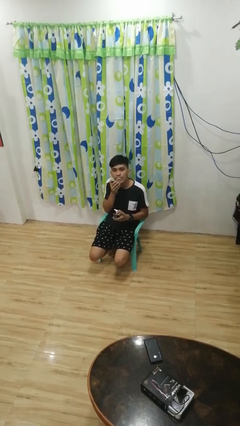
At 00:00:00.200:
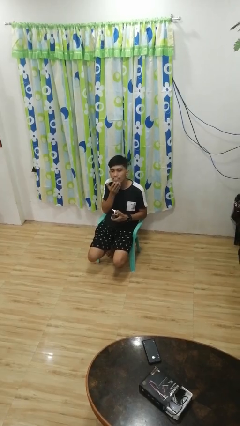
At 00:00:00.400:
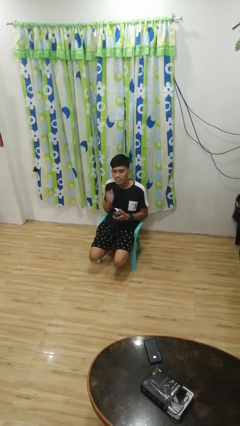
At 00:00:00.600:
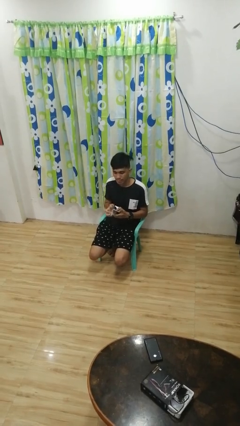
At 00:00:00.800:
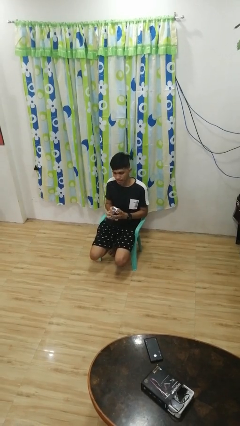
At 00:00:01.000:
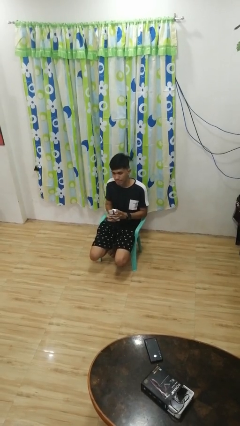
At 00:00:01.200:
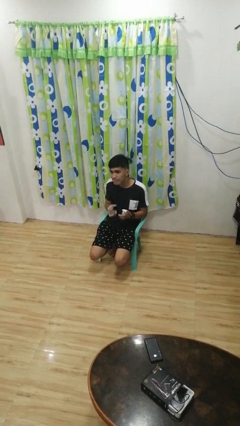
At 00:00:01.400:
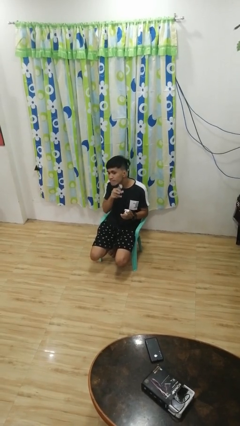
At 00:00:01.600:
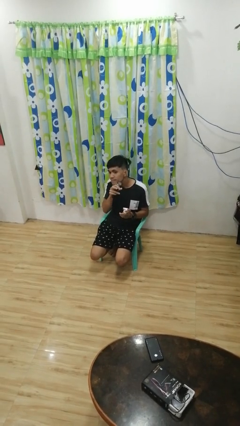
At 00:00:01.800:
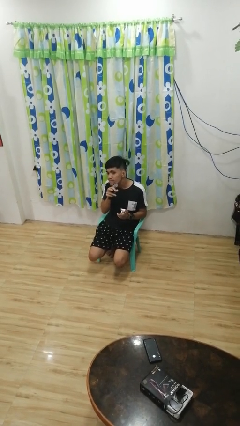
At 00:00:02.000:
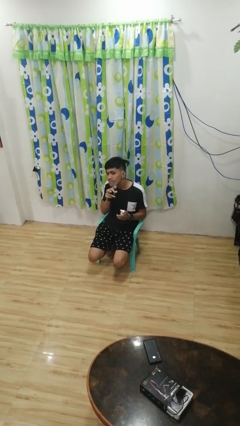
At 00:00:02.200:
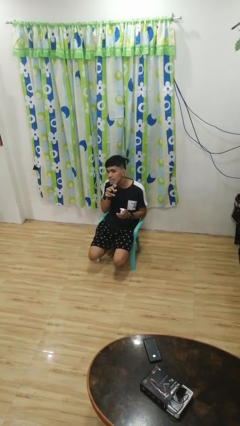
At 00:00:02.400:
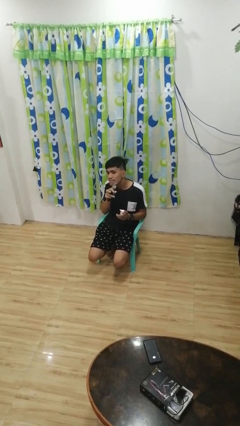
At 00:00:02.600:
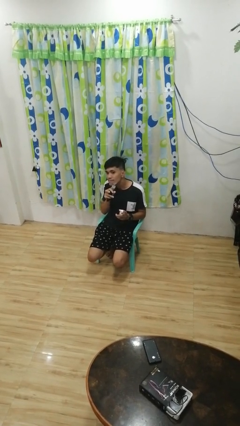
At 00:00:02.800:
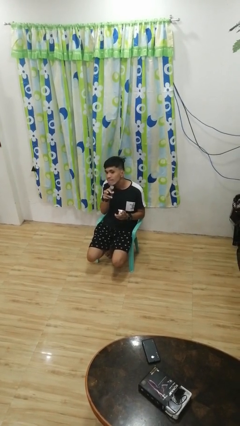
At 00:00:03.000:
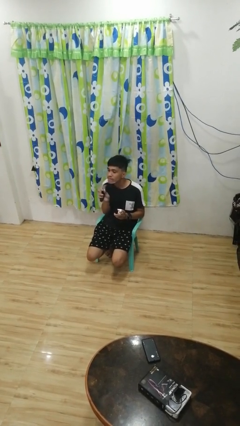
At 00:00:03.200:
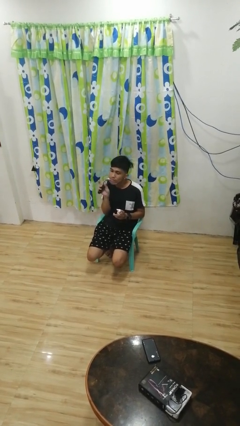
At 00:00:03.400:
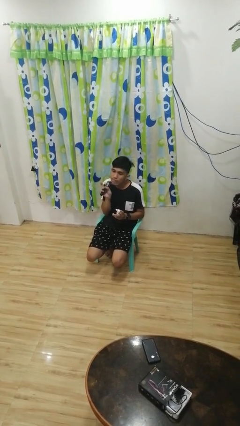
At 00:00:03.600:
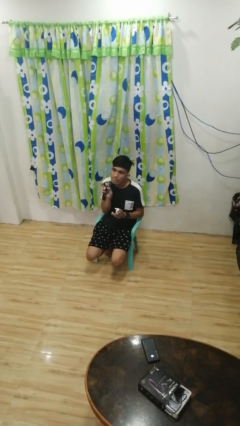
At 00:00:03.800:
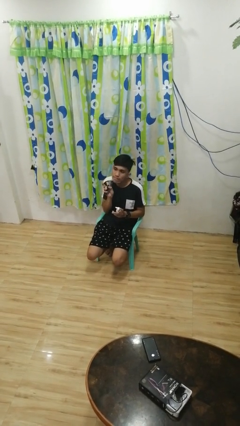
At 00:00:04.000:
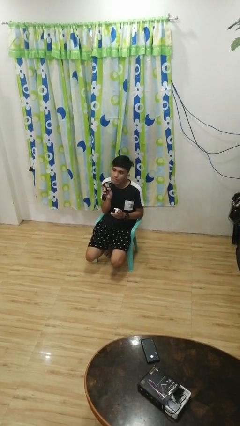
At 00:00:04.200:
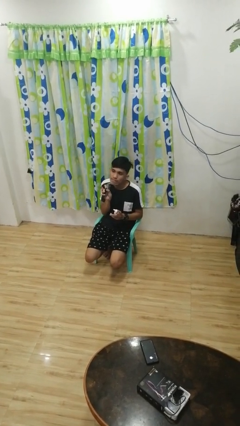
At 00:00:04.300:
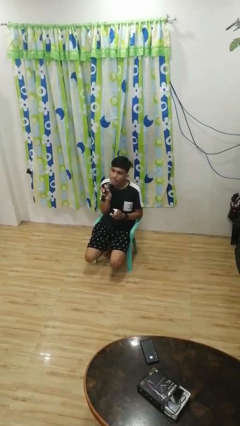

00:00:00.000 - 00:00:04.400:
person shaves face

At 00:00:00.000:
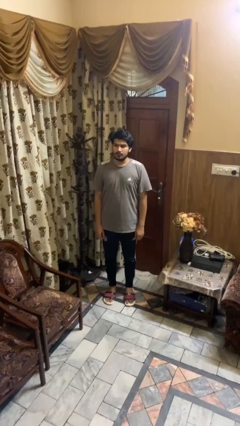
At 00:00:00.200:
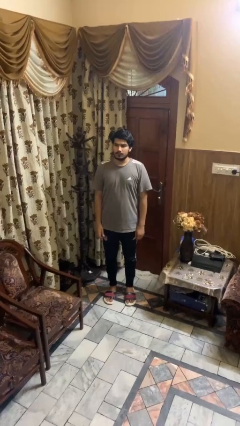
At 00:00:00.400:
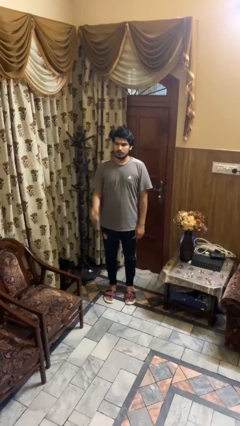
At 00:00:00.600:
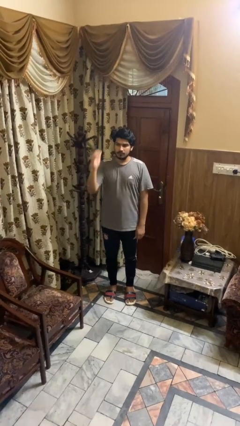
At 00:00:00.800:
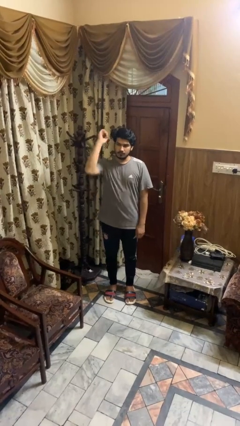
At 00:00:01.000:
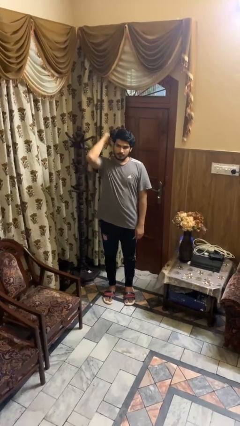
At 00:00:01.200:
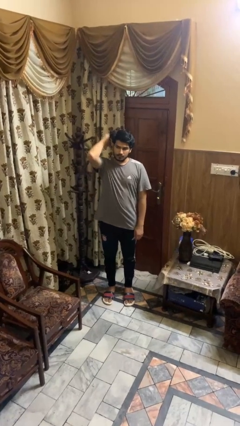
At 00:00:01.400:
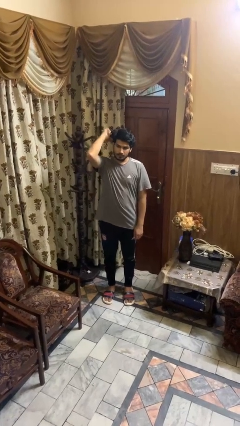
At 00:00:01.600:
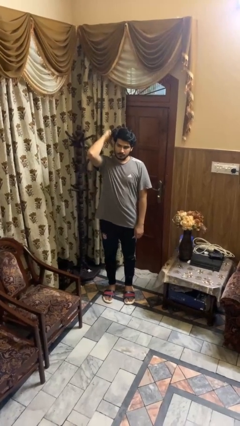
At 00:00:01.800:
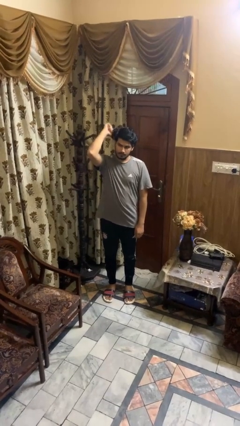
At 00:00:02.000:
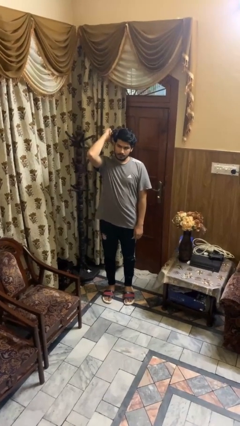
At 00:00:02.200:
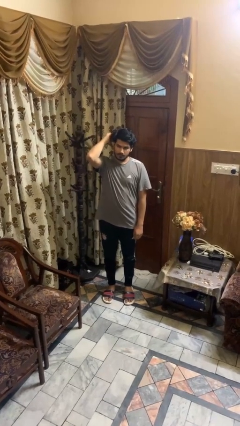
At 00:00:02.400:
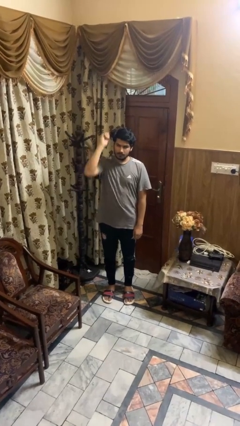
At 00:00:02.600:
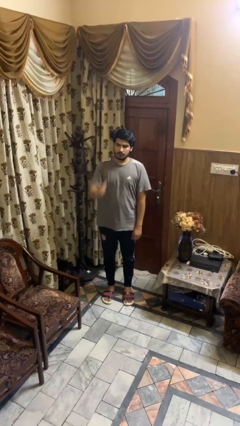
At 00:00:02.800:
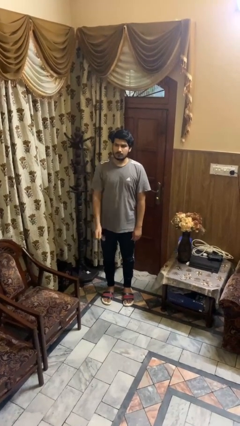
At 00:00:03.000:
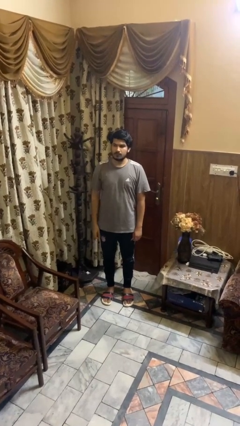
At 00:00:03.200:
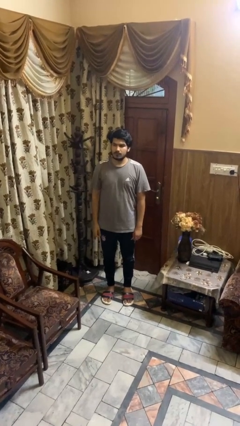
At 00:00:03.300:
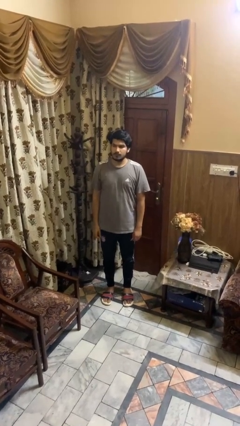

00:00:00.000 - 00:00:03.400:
person gestures behind me

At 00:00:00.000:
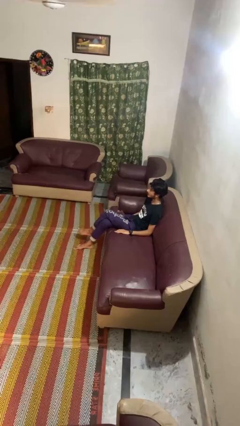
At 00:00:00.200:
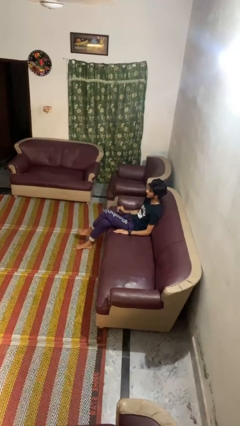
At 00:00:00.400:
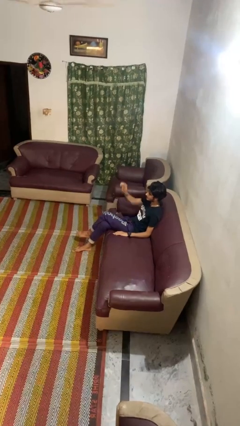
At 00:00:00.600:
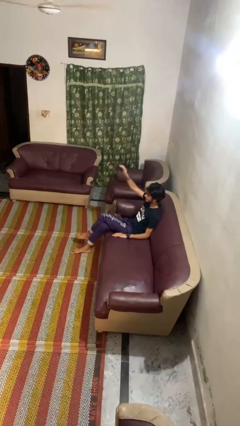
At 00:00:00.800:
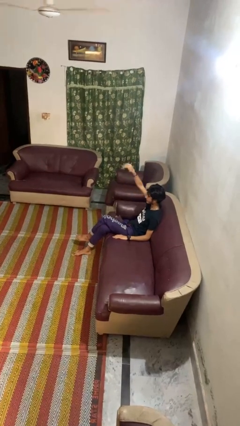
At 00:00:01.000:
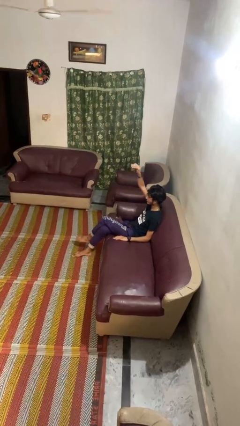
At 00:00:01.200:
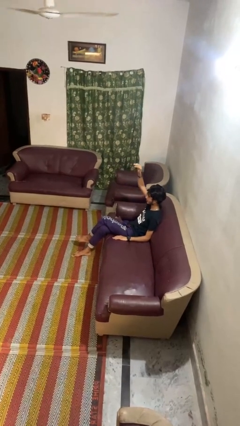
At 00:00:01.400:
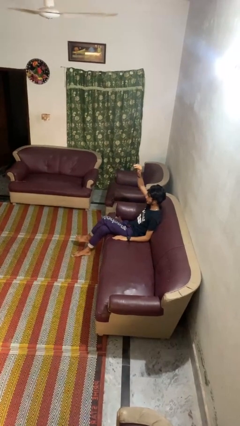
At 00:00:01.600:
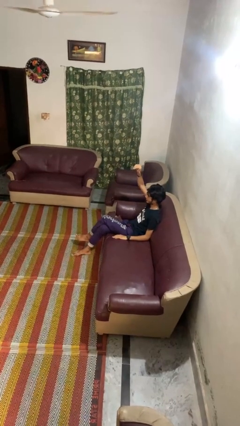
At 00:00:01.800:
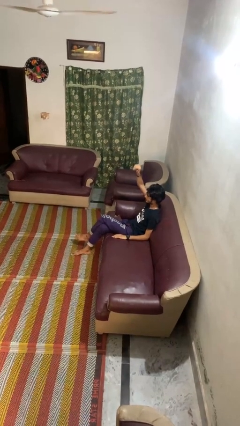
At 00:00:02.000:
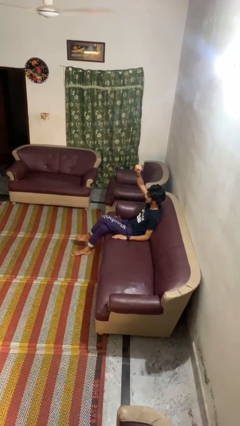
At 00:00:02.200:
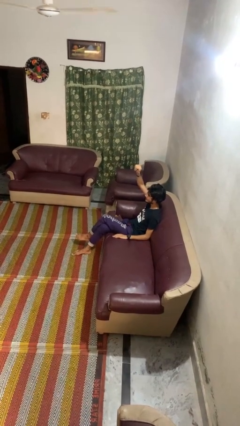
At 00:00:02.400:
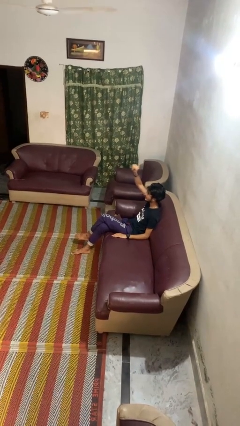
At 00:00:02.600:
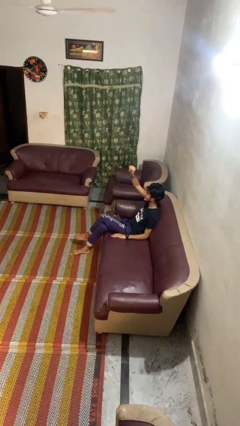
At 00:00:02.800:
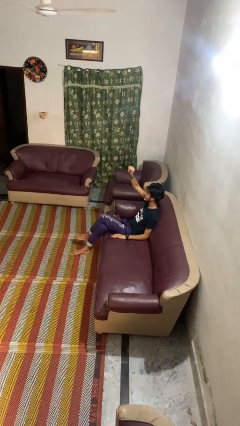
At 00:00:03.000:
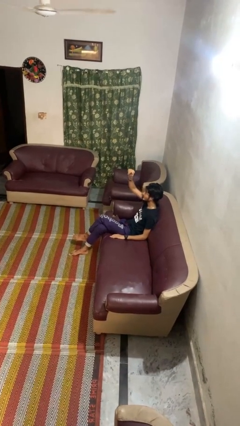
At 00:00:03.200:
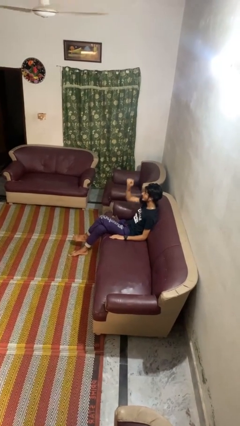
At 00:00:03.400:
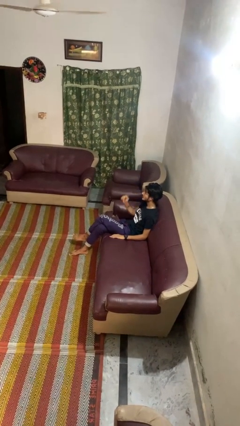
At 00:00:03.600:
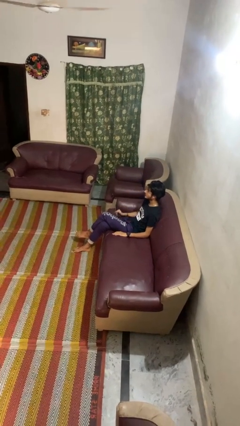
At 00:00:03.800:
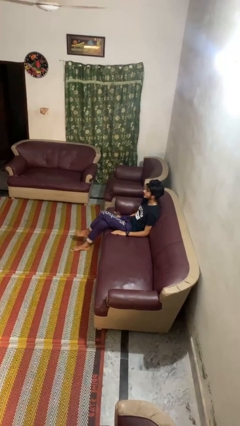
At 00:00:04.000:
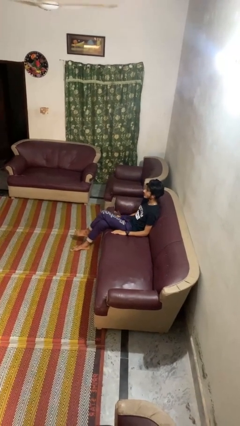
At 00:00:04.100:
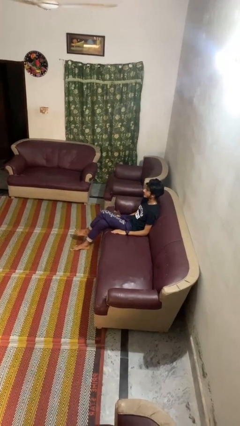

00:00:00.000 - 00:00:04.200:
person gestures come here

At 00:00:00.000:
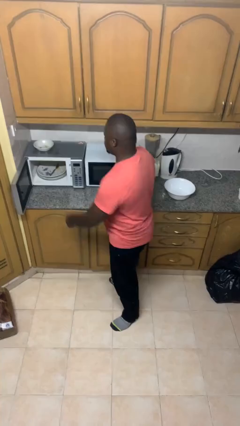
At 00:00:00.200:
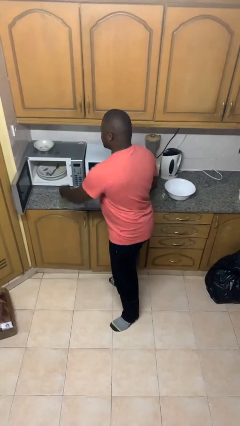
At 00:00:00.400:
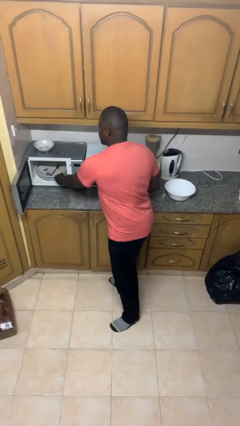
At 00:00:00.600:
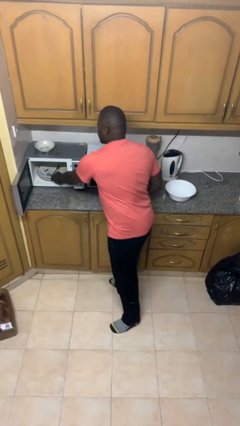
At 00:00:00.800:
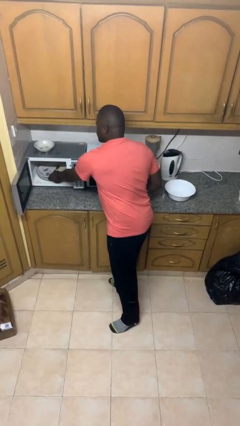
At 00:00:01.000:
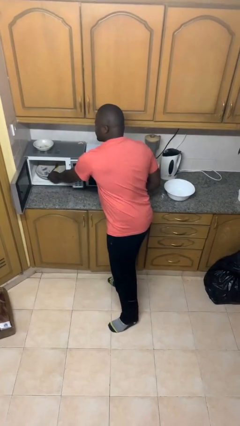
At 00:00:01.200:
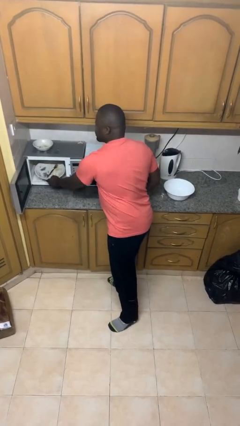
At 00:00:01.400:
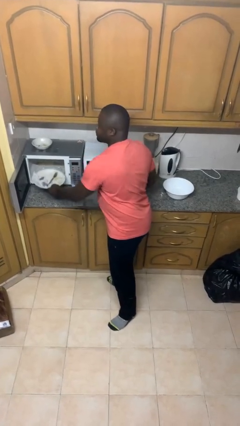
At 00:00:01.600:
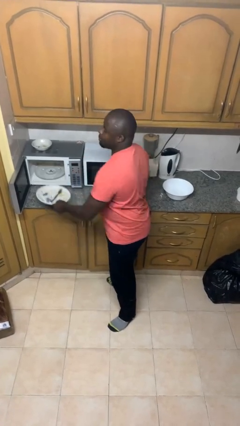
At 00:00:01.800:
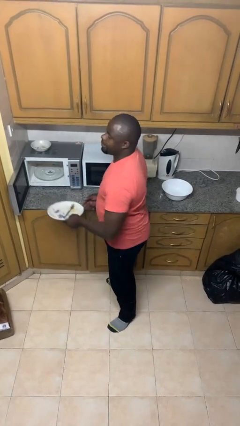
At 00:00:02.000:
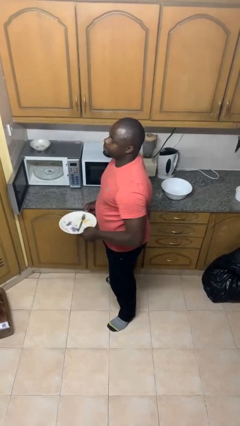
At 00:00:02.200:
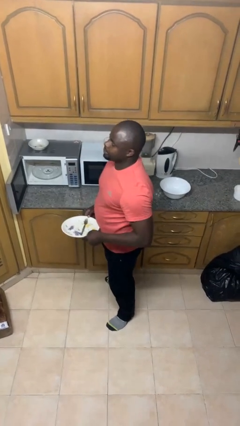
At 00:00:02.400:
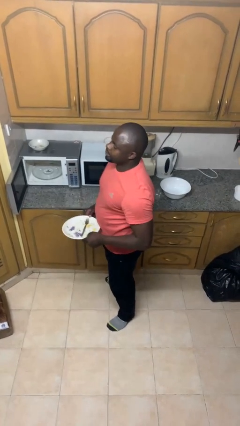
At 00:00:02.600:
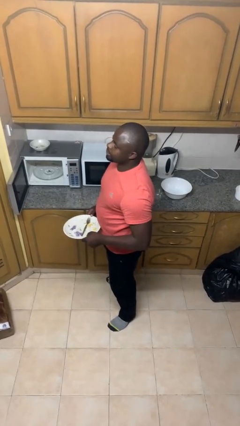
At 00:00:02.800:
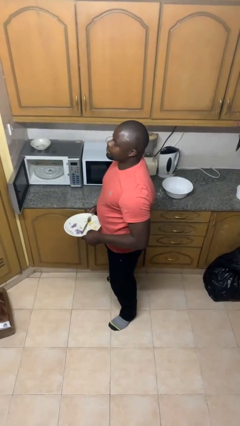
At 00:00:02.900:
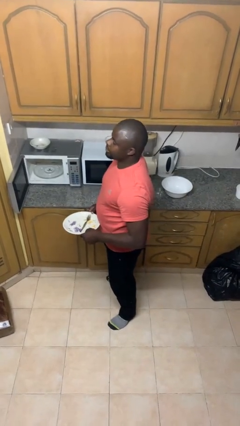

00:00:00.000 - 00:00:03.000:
person takes object from microwave

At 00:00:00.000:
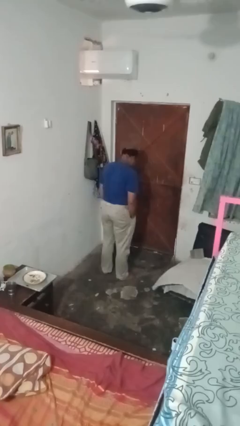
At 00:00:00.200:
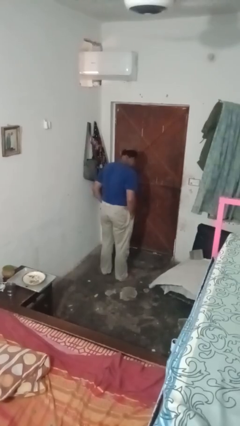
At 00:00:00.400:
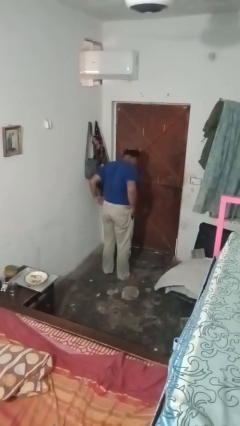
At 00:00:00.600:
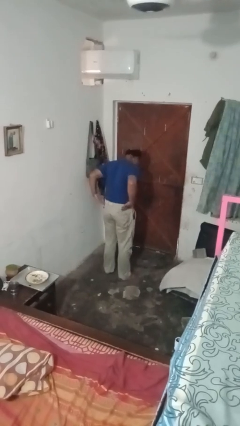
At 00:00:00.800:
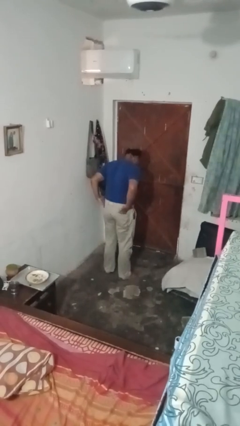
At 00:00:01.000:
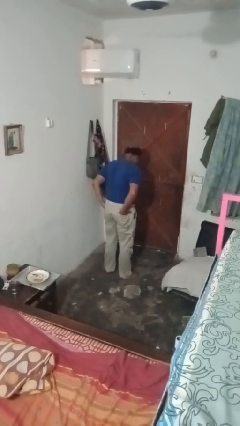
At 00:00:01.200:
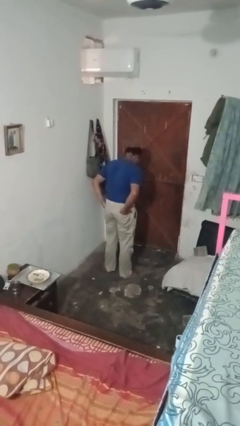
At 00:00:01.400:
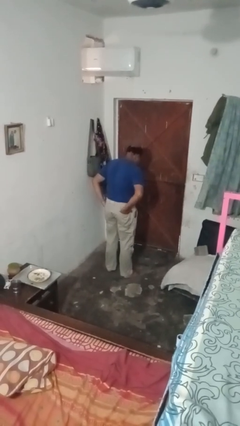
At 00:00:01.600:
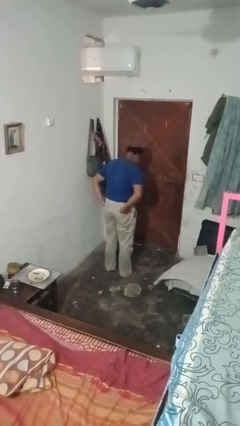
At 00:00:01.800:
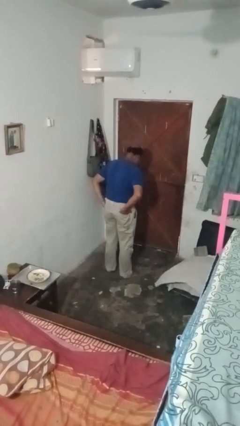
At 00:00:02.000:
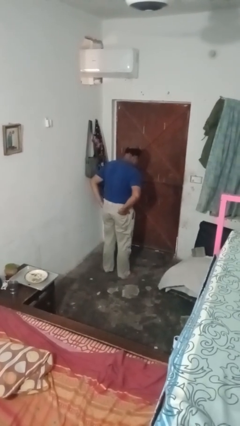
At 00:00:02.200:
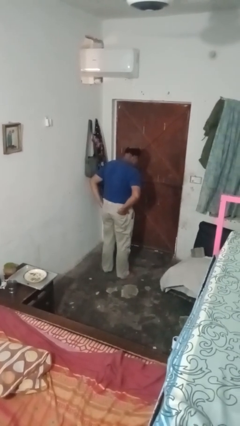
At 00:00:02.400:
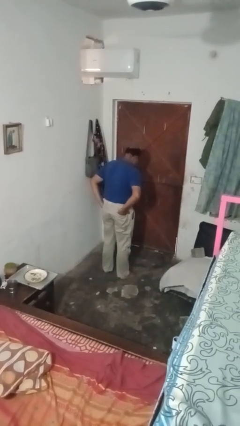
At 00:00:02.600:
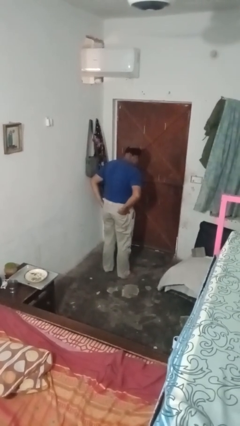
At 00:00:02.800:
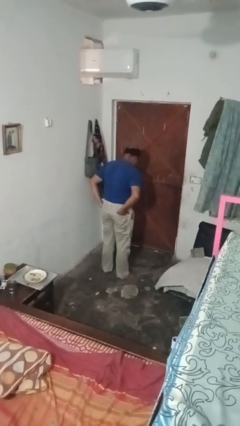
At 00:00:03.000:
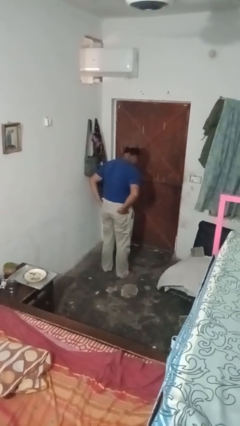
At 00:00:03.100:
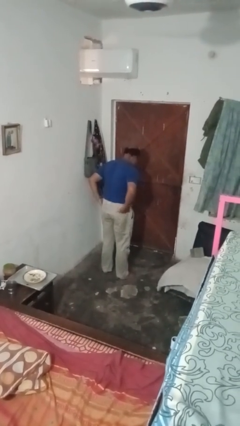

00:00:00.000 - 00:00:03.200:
person puts hands in back pockets
